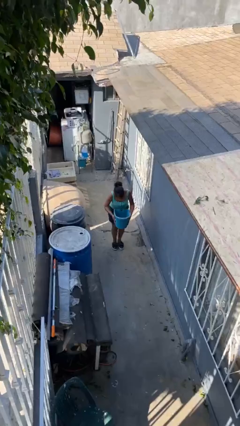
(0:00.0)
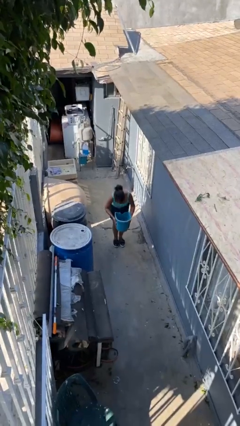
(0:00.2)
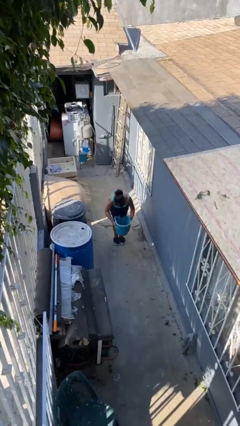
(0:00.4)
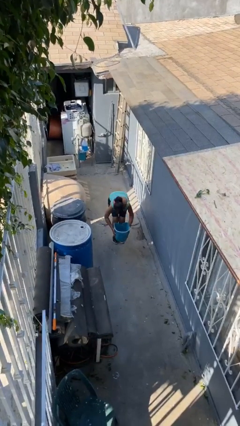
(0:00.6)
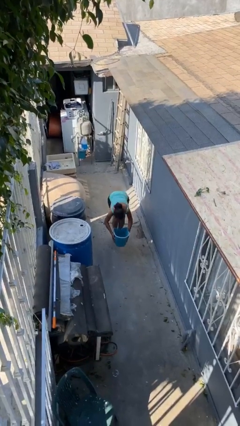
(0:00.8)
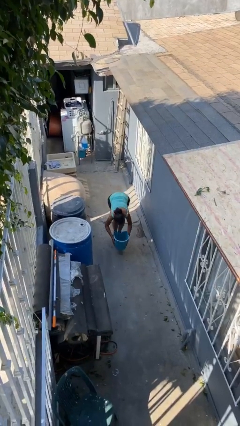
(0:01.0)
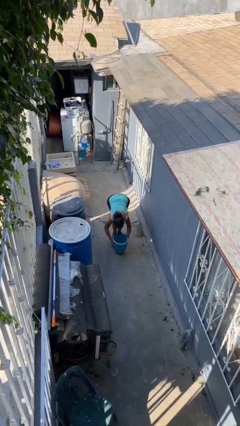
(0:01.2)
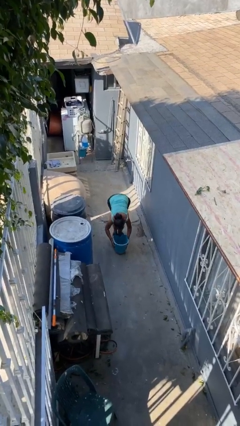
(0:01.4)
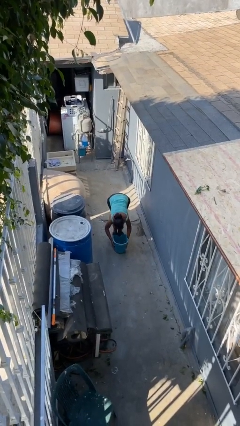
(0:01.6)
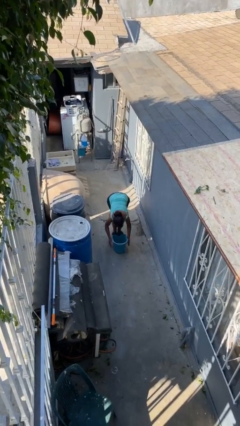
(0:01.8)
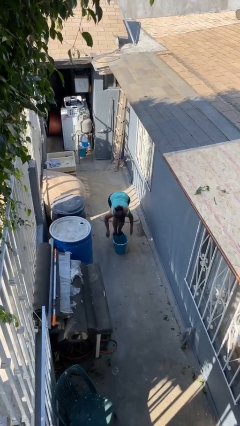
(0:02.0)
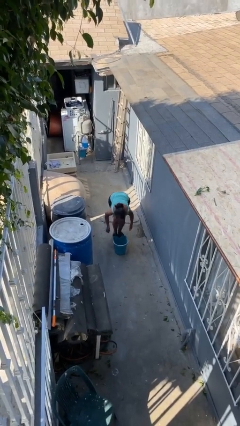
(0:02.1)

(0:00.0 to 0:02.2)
person puts down object on floor

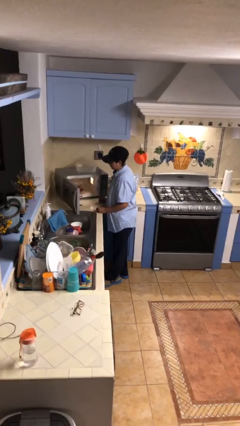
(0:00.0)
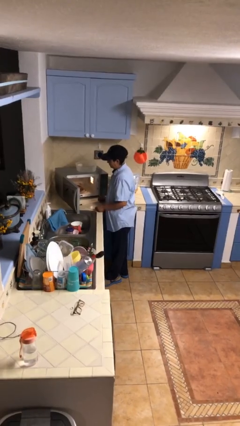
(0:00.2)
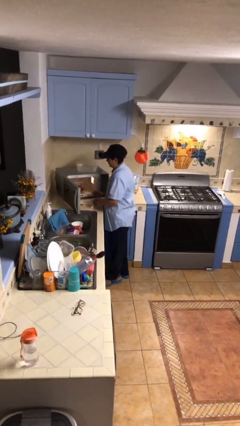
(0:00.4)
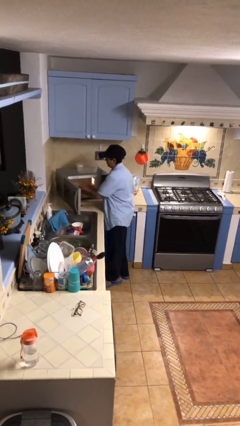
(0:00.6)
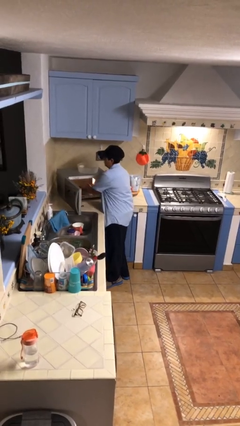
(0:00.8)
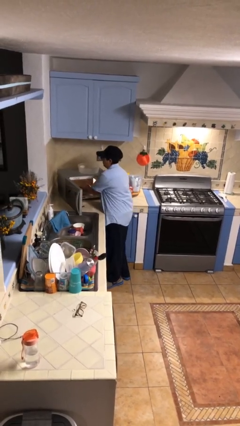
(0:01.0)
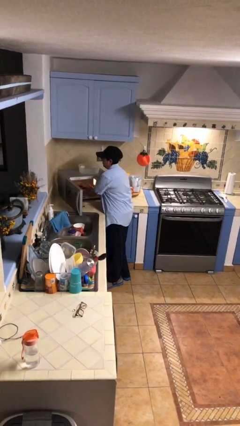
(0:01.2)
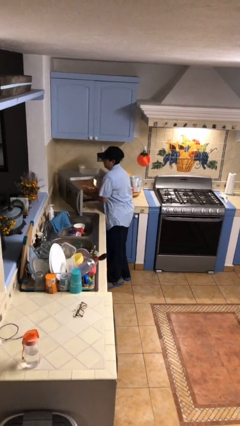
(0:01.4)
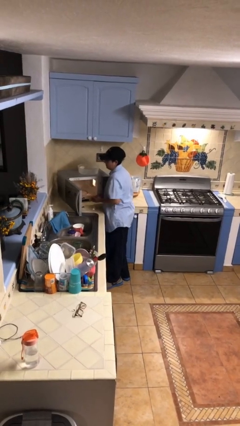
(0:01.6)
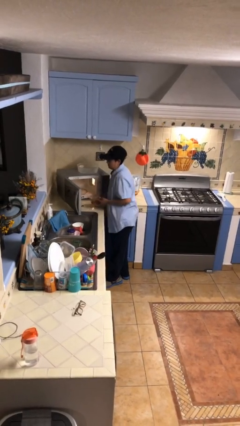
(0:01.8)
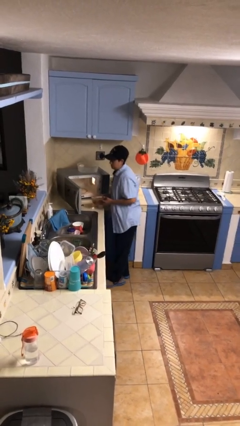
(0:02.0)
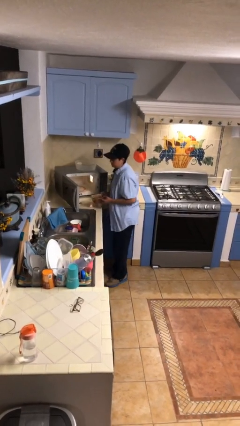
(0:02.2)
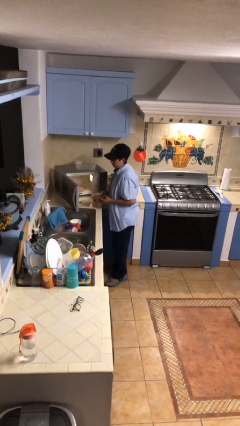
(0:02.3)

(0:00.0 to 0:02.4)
person takes object from microwave

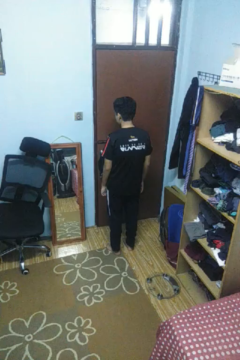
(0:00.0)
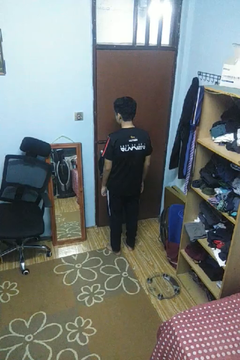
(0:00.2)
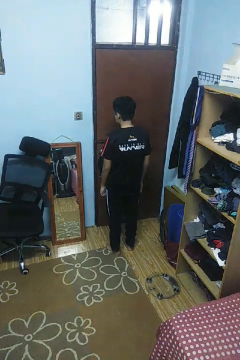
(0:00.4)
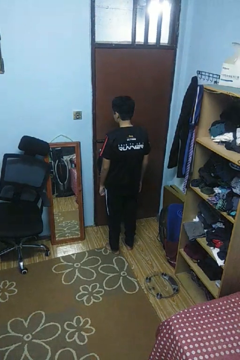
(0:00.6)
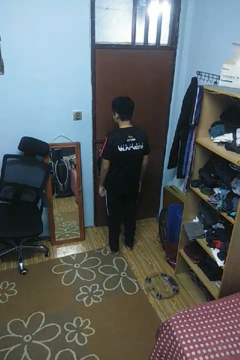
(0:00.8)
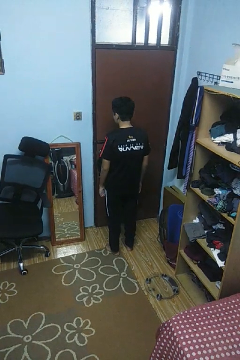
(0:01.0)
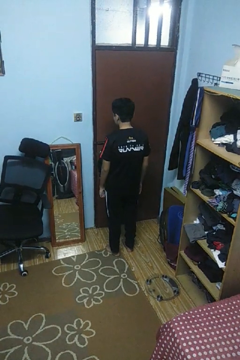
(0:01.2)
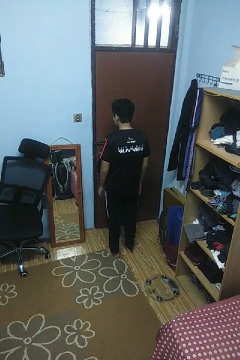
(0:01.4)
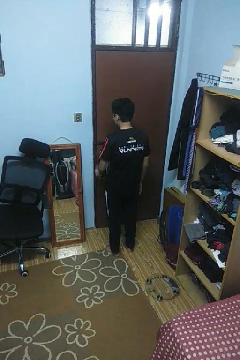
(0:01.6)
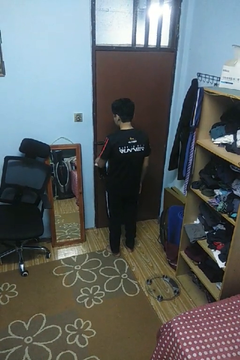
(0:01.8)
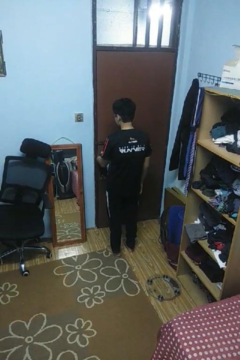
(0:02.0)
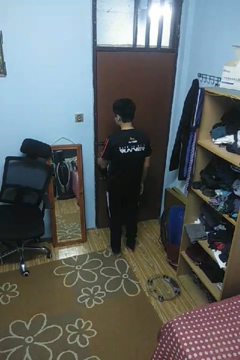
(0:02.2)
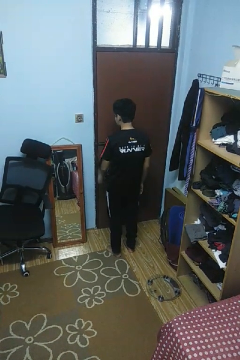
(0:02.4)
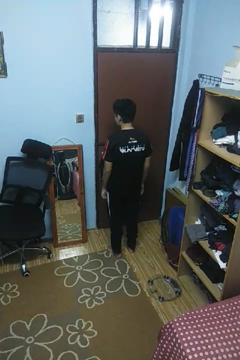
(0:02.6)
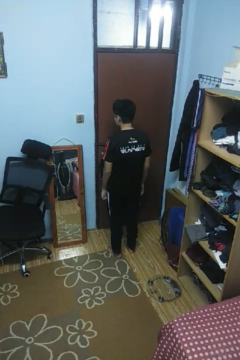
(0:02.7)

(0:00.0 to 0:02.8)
person unlocks door with keys

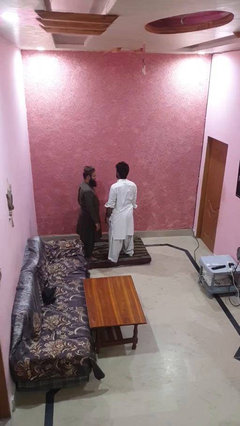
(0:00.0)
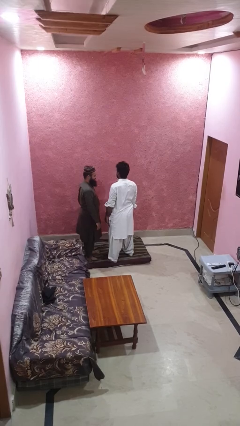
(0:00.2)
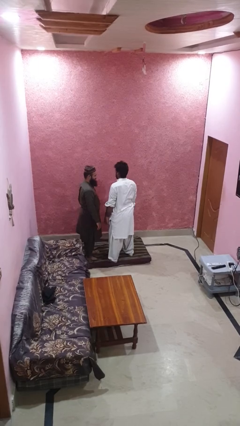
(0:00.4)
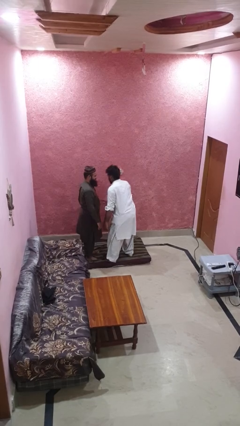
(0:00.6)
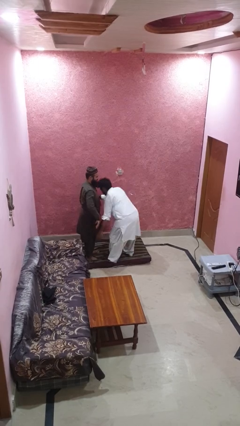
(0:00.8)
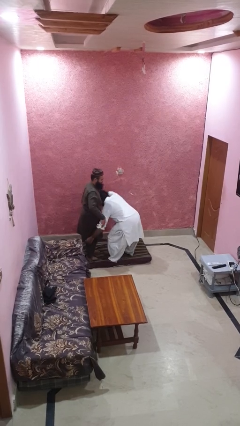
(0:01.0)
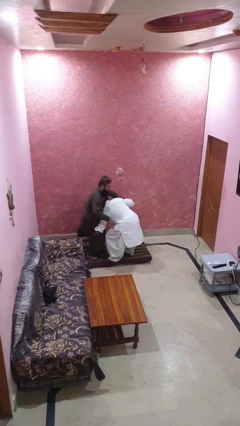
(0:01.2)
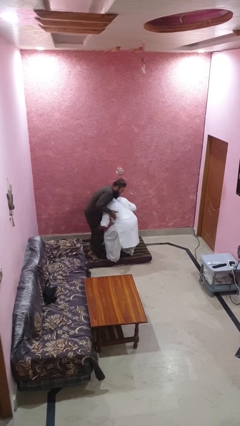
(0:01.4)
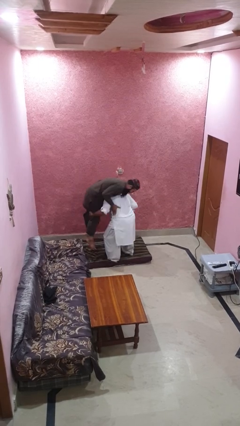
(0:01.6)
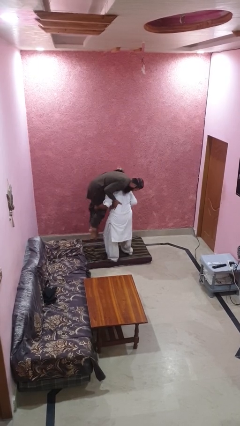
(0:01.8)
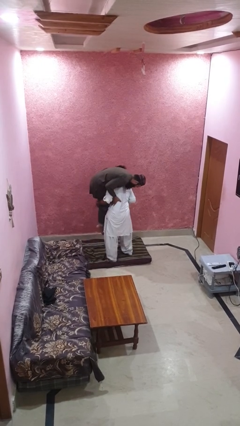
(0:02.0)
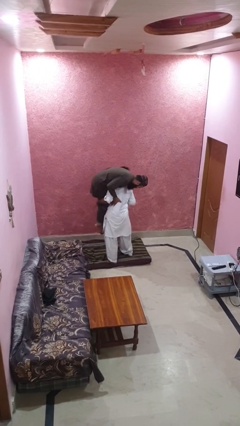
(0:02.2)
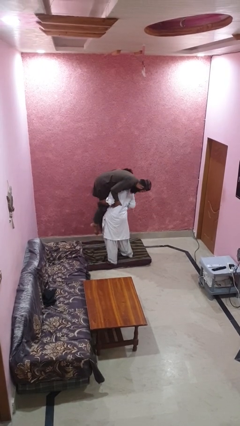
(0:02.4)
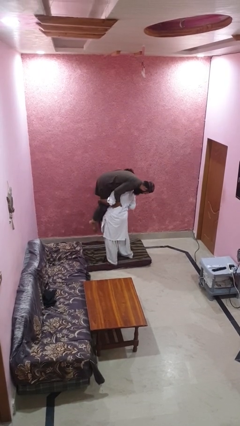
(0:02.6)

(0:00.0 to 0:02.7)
person carries person over shoulder

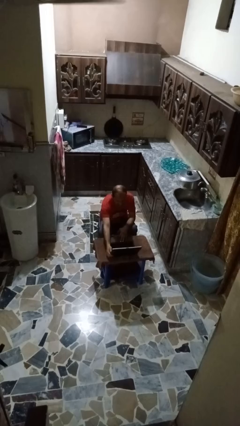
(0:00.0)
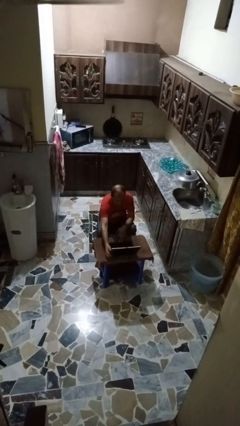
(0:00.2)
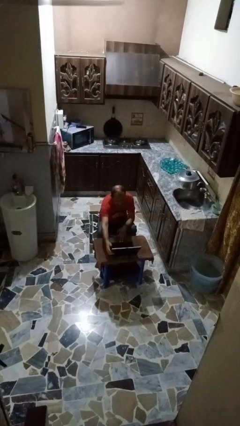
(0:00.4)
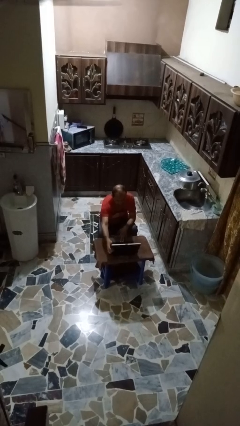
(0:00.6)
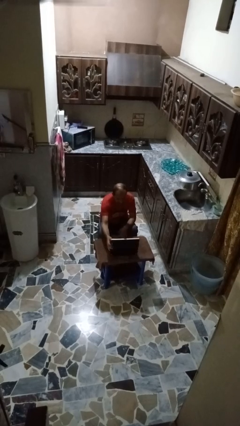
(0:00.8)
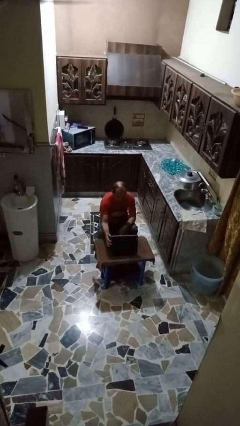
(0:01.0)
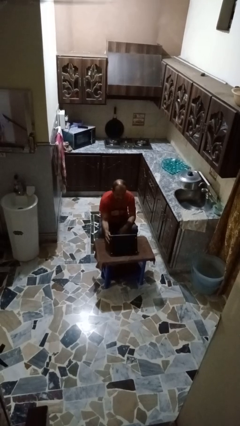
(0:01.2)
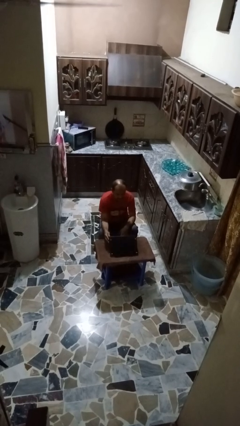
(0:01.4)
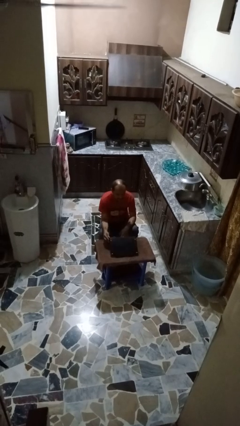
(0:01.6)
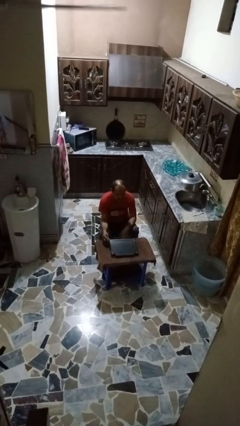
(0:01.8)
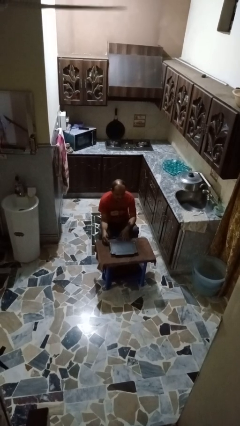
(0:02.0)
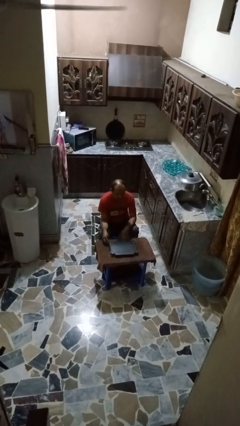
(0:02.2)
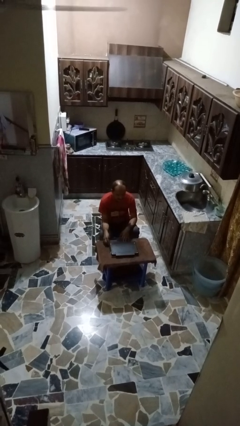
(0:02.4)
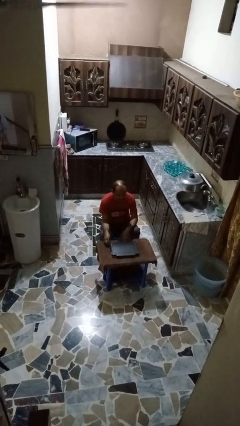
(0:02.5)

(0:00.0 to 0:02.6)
person closes laptop

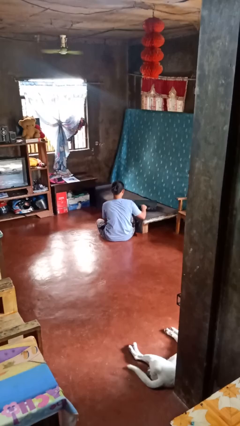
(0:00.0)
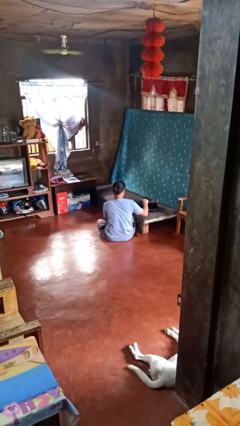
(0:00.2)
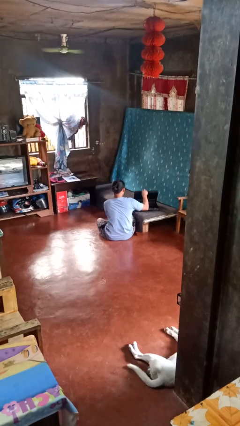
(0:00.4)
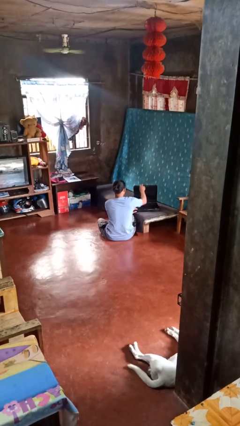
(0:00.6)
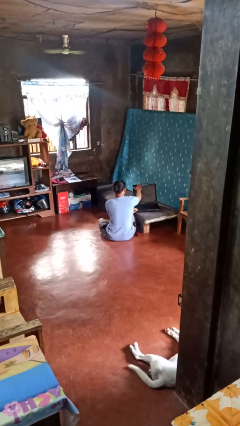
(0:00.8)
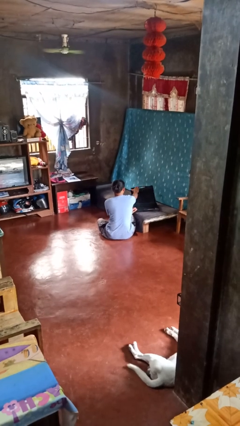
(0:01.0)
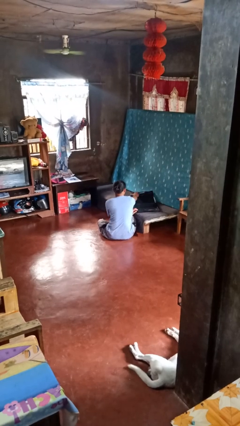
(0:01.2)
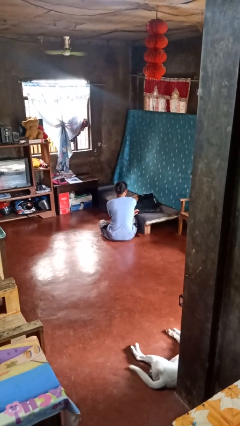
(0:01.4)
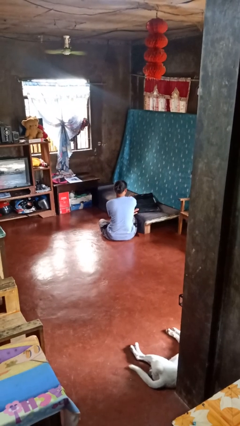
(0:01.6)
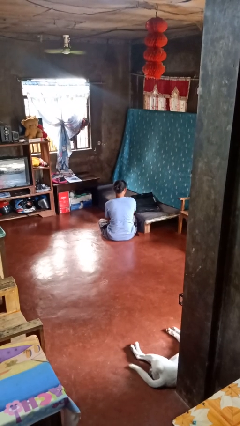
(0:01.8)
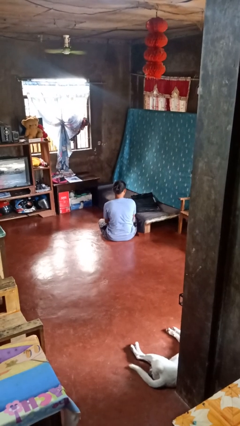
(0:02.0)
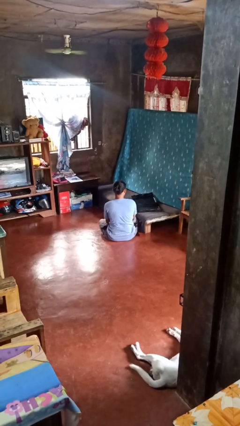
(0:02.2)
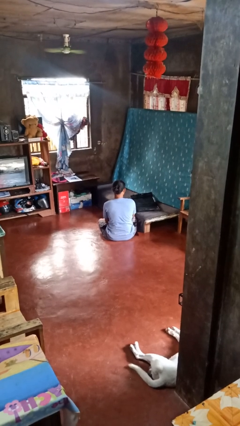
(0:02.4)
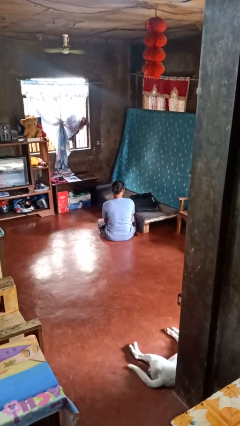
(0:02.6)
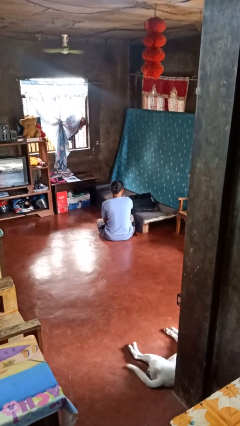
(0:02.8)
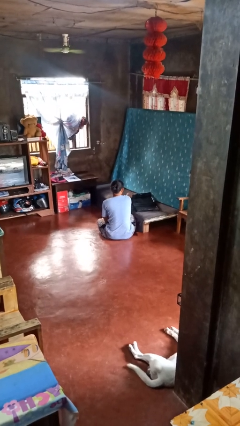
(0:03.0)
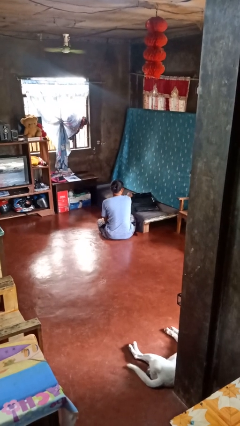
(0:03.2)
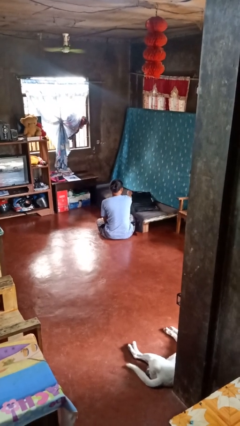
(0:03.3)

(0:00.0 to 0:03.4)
person opens suitcase

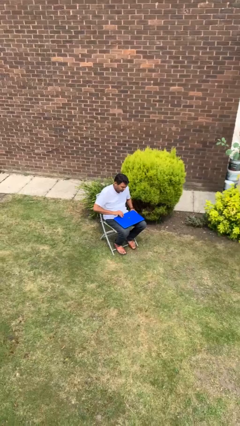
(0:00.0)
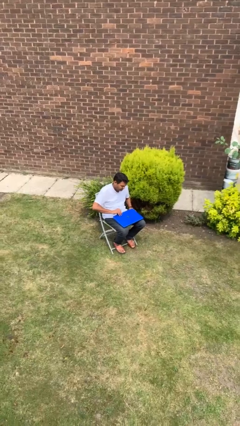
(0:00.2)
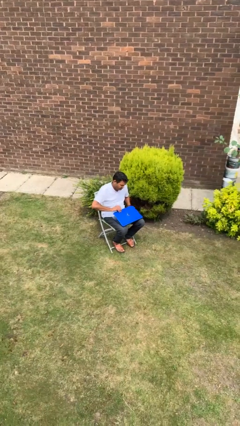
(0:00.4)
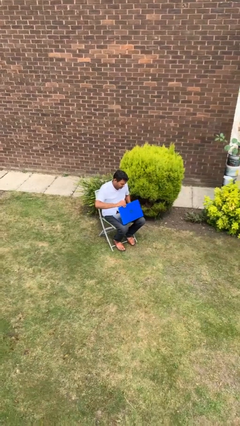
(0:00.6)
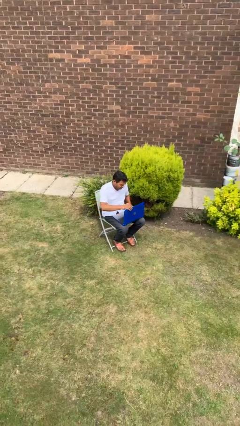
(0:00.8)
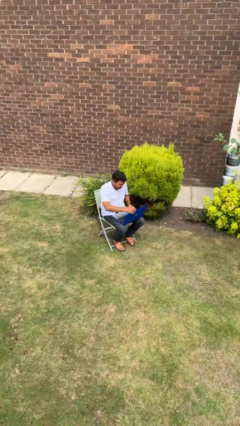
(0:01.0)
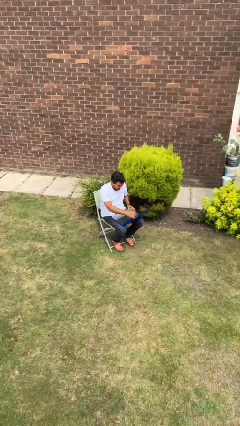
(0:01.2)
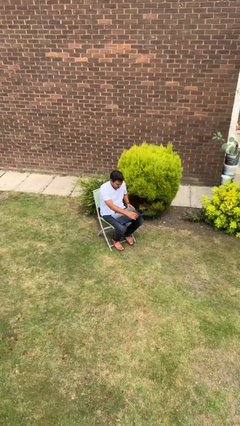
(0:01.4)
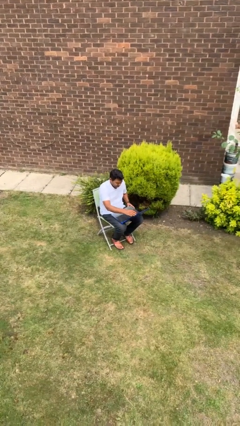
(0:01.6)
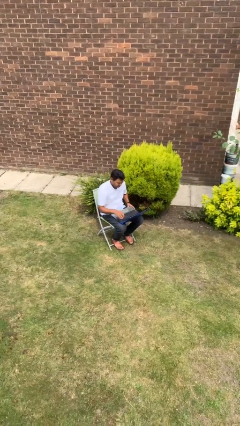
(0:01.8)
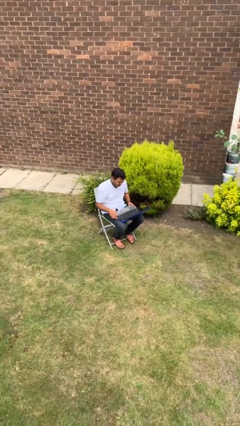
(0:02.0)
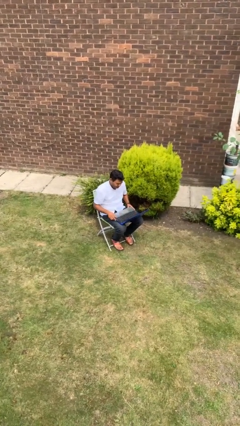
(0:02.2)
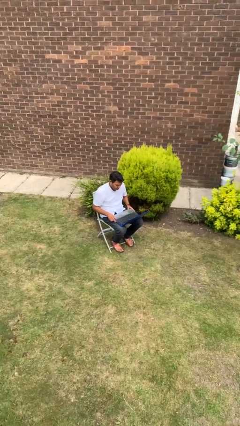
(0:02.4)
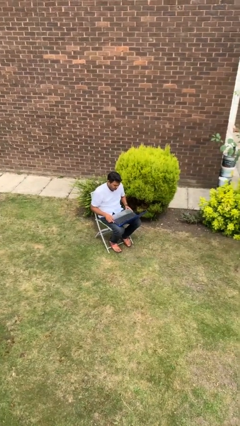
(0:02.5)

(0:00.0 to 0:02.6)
person opens laptop
